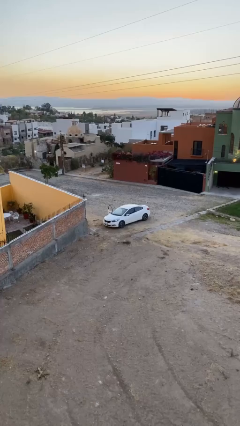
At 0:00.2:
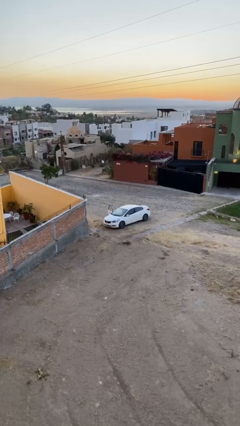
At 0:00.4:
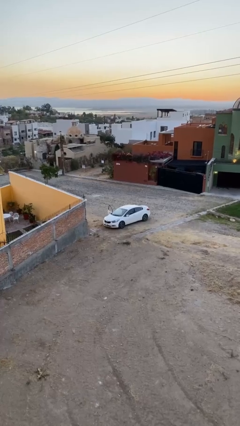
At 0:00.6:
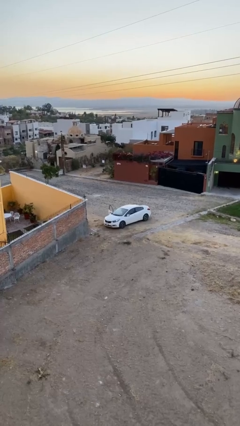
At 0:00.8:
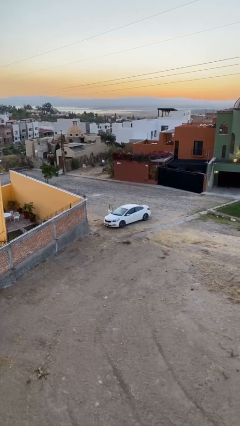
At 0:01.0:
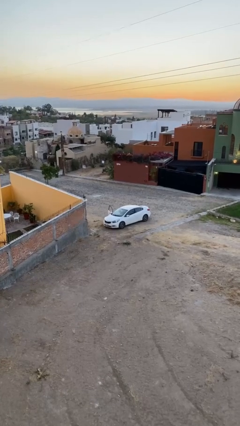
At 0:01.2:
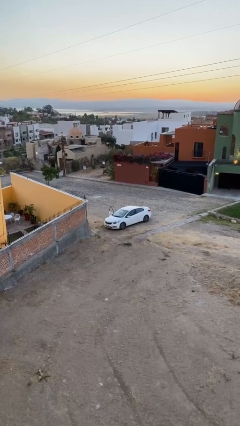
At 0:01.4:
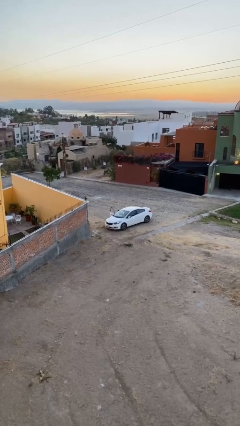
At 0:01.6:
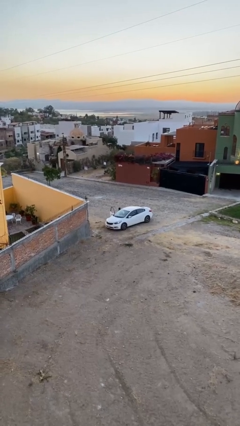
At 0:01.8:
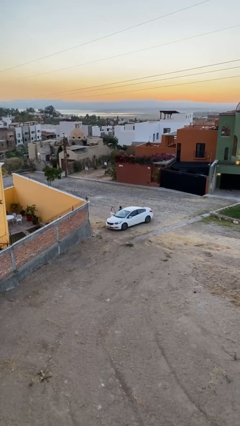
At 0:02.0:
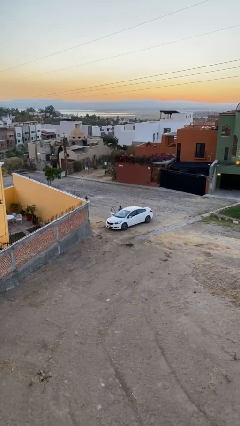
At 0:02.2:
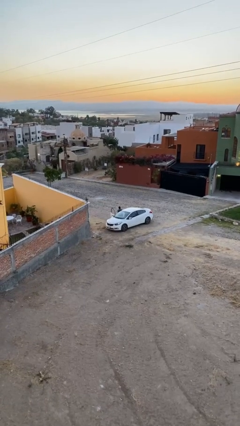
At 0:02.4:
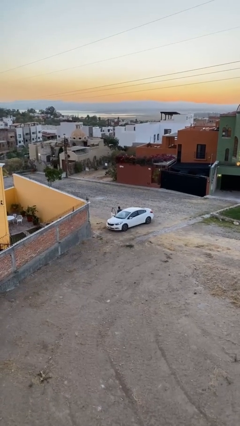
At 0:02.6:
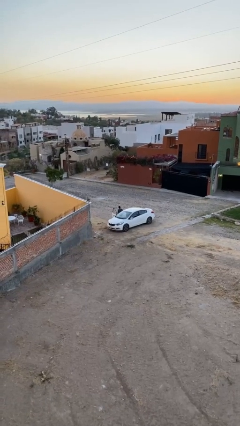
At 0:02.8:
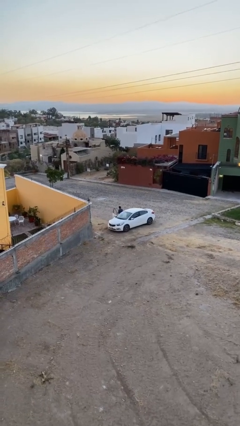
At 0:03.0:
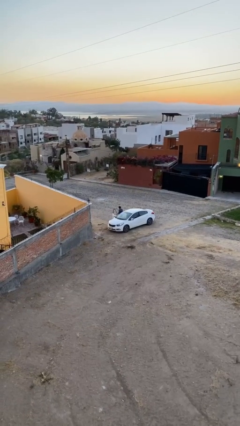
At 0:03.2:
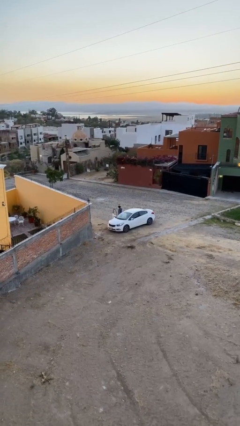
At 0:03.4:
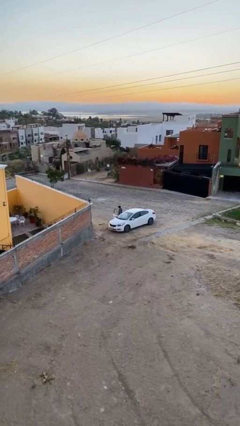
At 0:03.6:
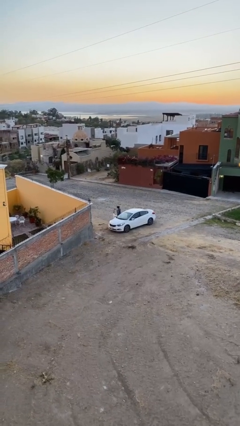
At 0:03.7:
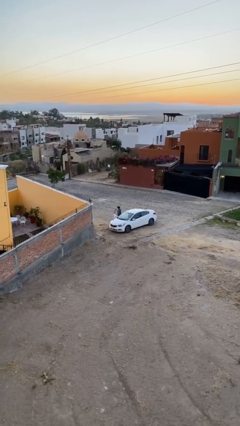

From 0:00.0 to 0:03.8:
person exits car

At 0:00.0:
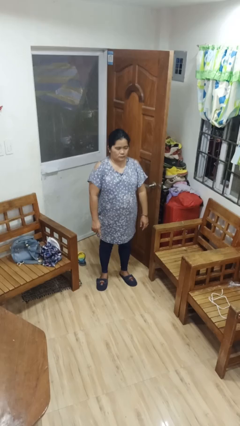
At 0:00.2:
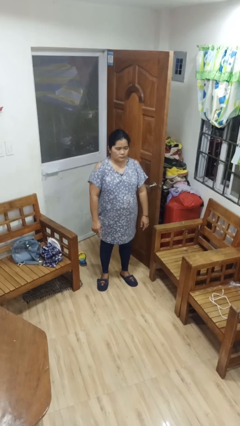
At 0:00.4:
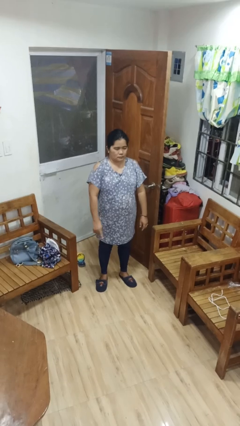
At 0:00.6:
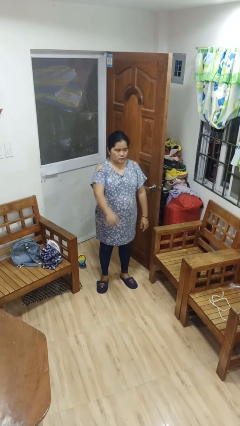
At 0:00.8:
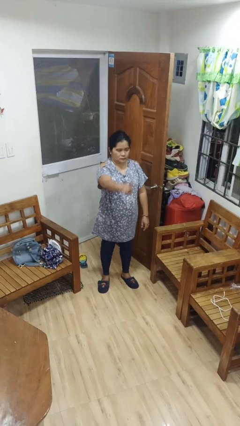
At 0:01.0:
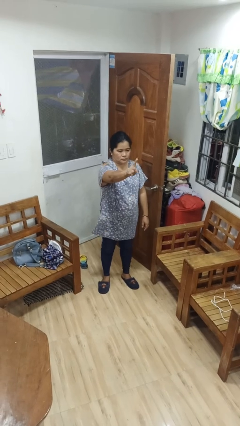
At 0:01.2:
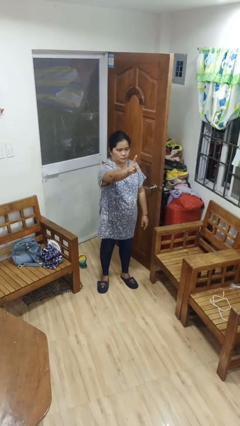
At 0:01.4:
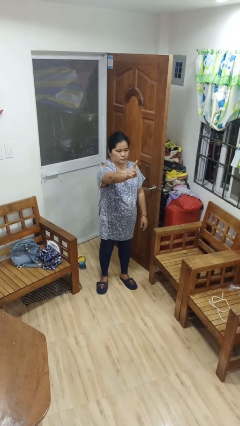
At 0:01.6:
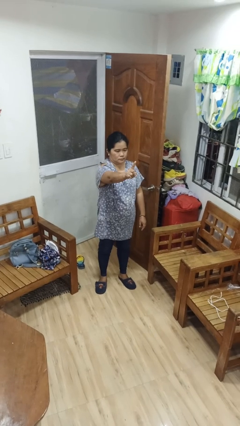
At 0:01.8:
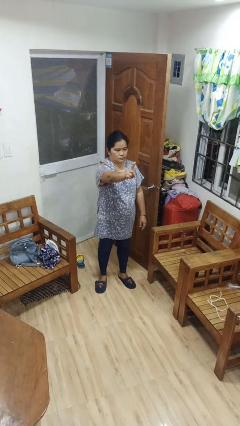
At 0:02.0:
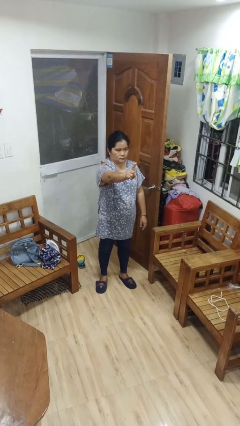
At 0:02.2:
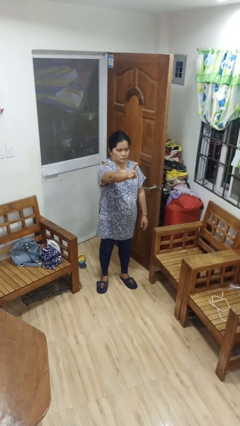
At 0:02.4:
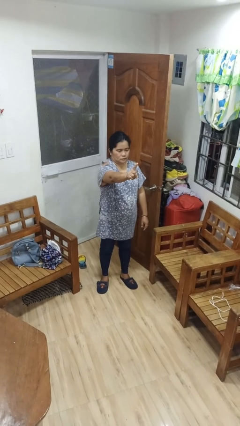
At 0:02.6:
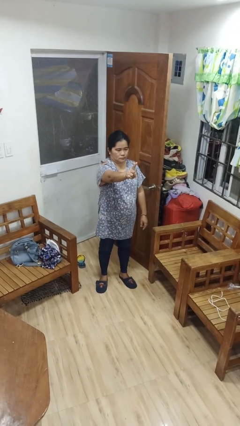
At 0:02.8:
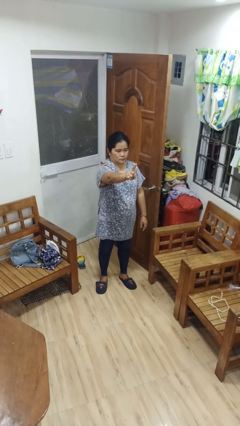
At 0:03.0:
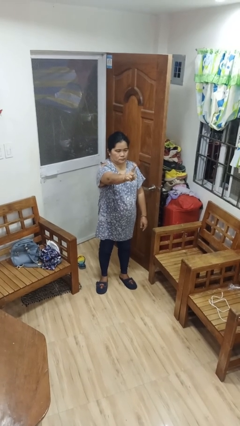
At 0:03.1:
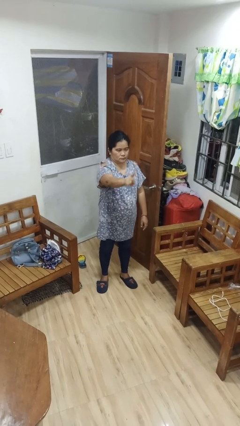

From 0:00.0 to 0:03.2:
person gestures number one

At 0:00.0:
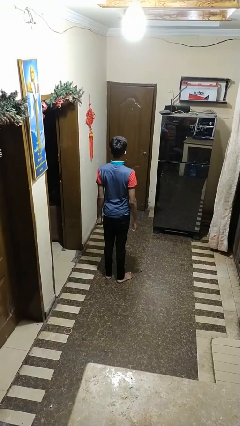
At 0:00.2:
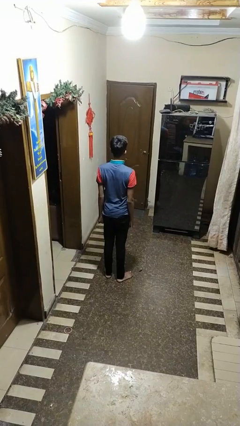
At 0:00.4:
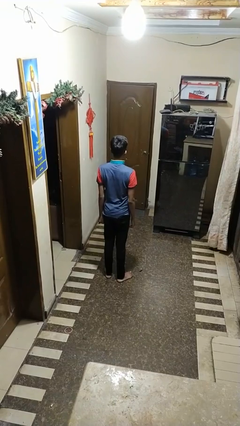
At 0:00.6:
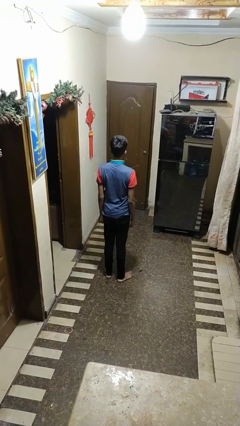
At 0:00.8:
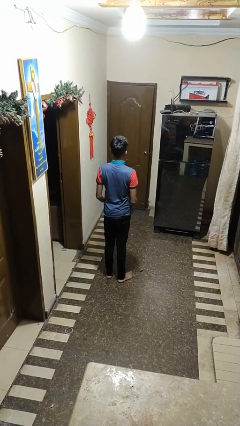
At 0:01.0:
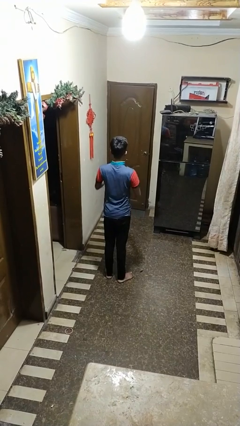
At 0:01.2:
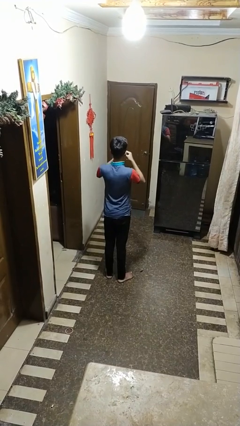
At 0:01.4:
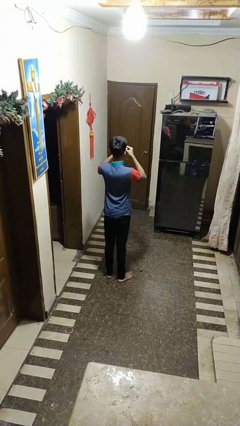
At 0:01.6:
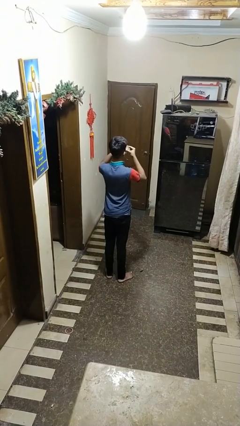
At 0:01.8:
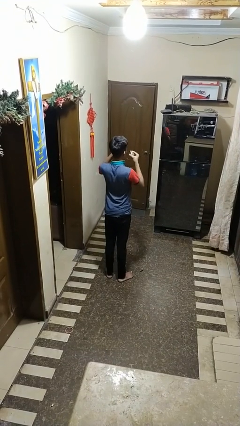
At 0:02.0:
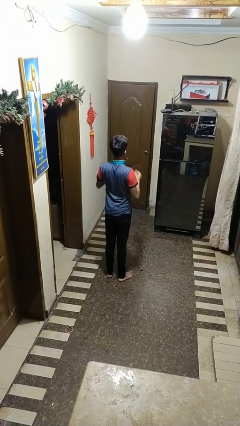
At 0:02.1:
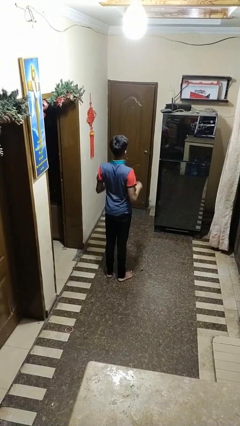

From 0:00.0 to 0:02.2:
person takes off ring

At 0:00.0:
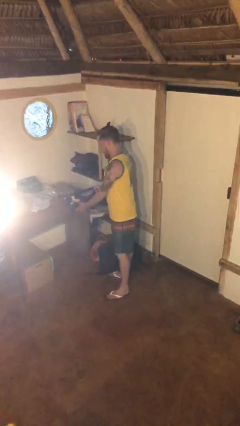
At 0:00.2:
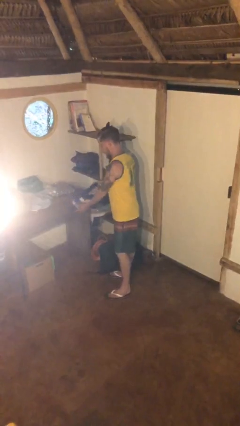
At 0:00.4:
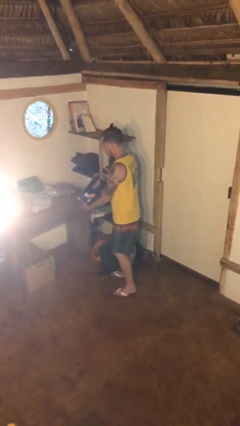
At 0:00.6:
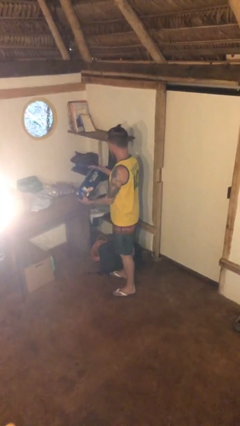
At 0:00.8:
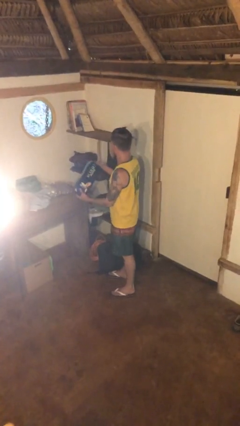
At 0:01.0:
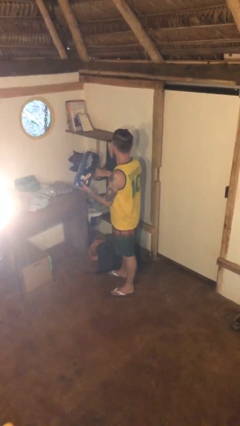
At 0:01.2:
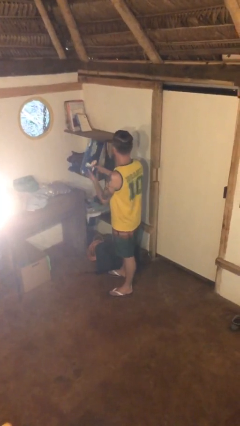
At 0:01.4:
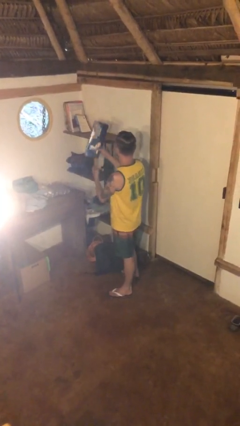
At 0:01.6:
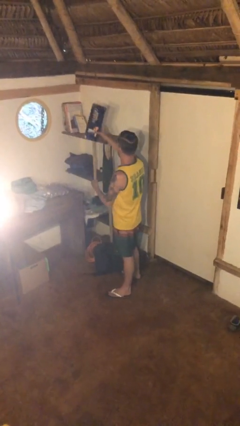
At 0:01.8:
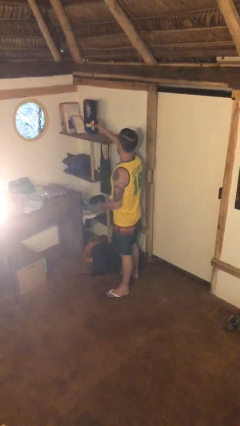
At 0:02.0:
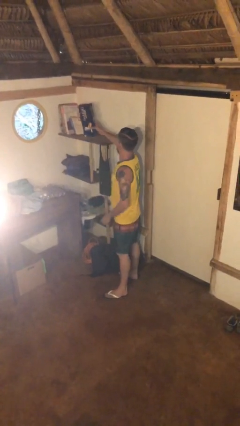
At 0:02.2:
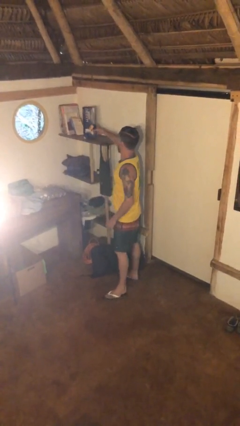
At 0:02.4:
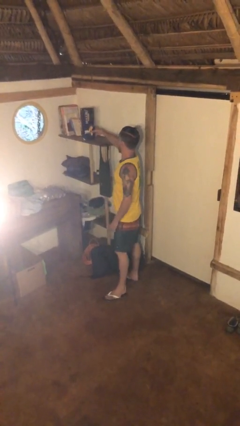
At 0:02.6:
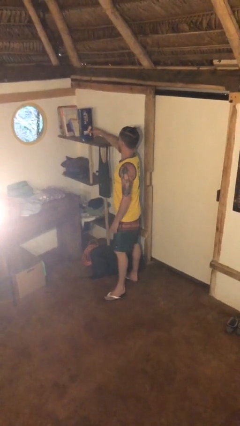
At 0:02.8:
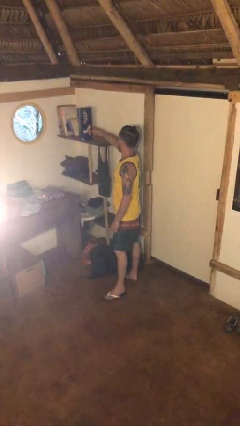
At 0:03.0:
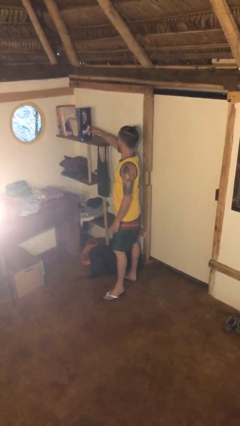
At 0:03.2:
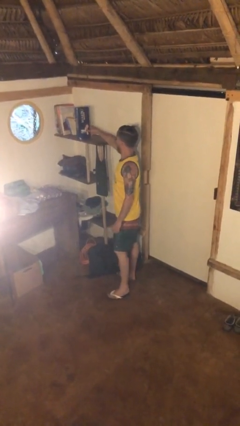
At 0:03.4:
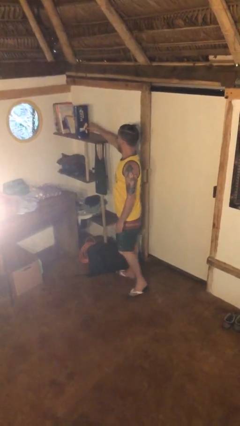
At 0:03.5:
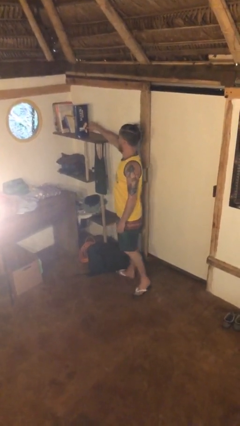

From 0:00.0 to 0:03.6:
person puts down object on shelf

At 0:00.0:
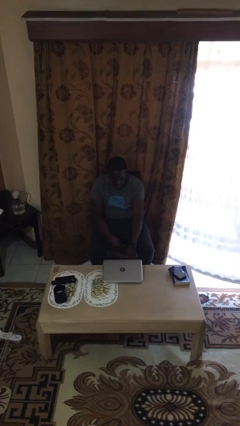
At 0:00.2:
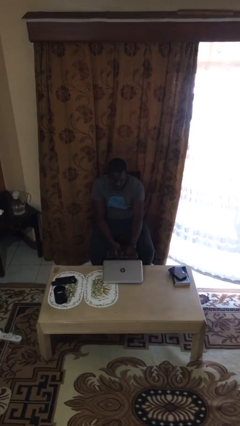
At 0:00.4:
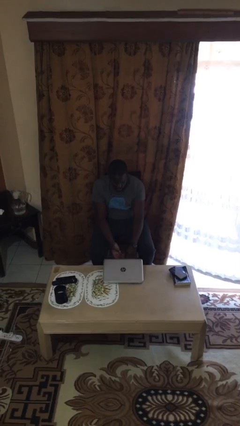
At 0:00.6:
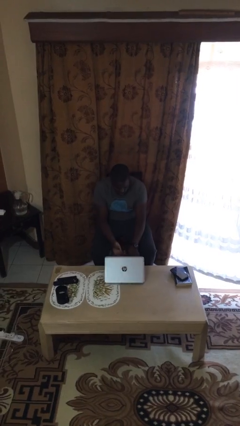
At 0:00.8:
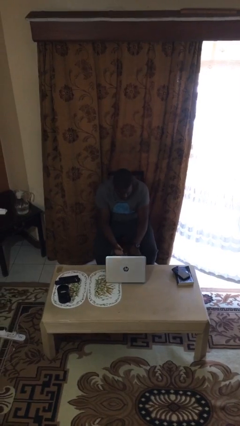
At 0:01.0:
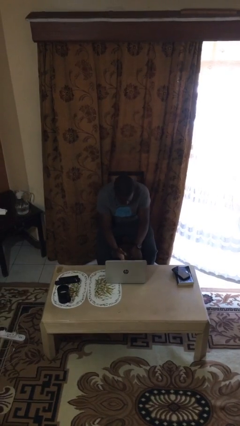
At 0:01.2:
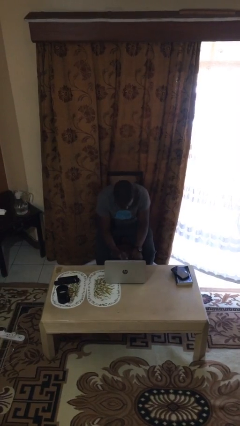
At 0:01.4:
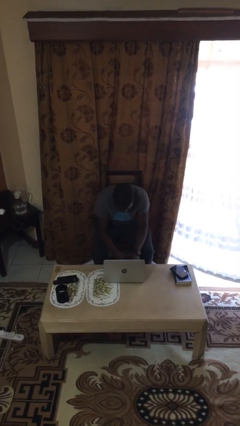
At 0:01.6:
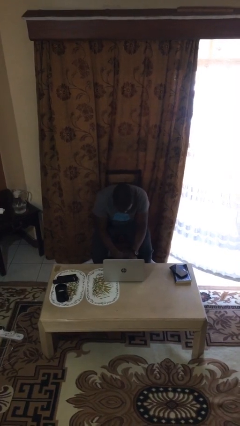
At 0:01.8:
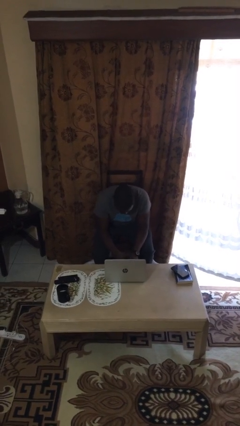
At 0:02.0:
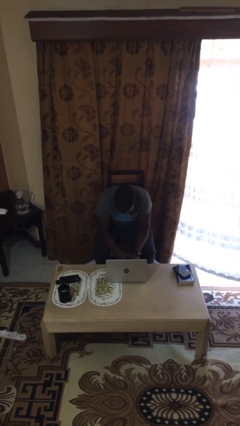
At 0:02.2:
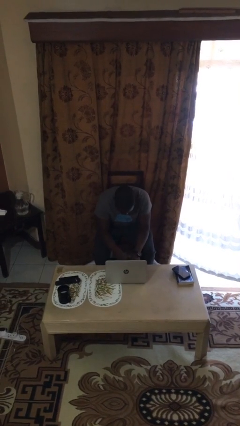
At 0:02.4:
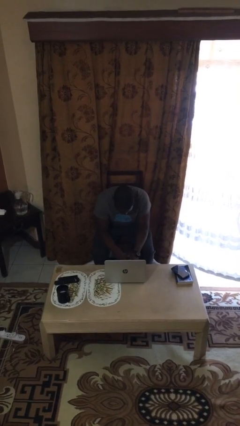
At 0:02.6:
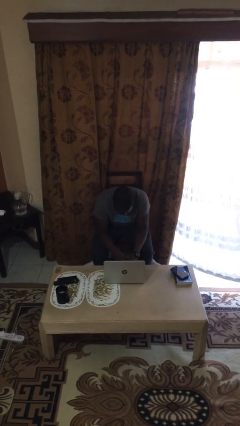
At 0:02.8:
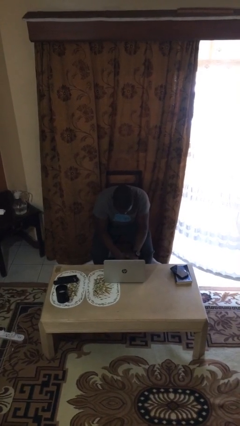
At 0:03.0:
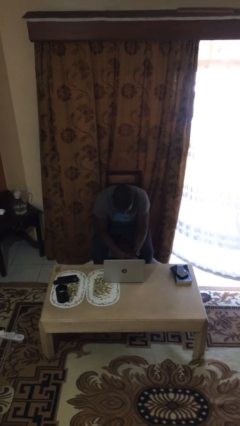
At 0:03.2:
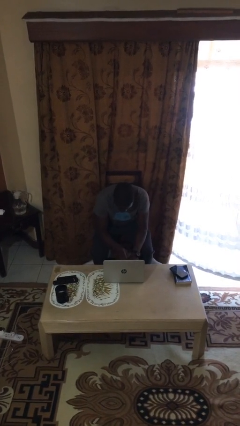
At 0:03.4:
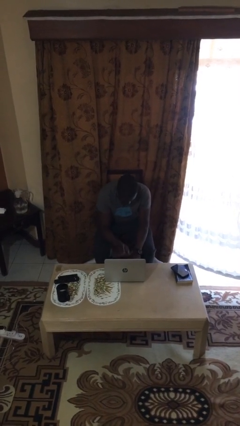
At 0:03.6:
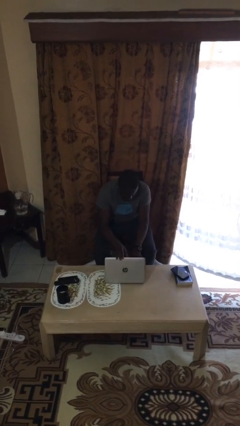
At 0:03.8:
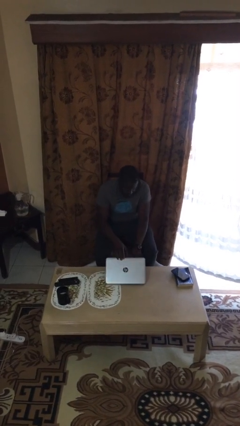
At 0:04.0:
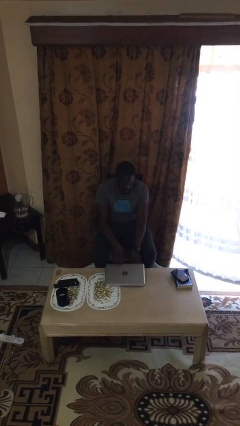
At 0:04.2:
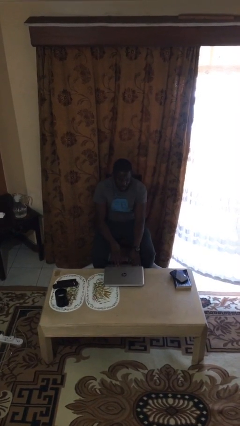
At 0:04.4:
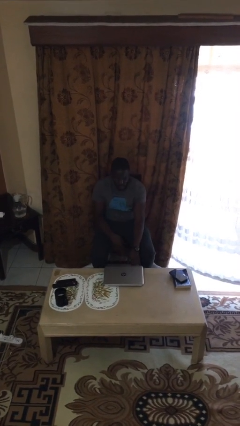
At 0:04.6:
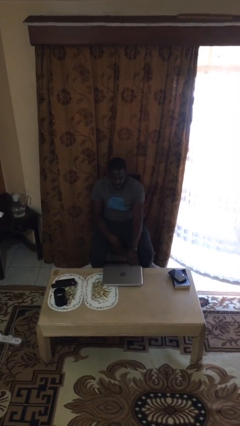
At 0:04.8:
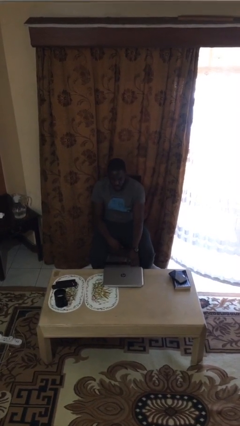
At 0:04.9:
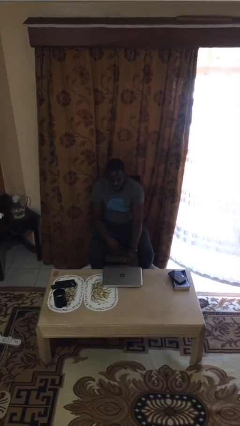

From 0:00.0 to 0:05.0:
person interacts with laptop
